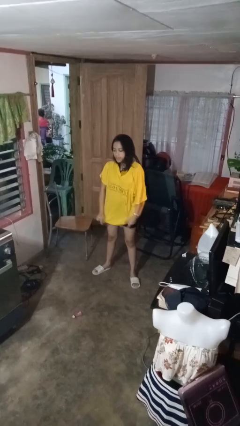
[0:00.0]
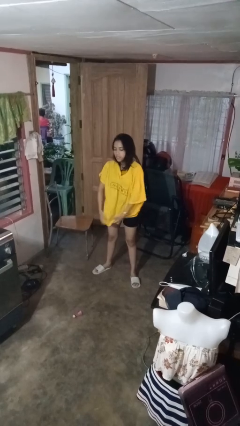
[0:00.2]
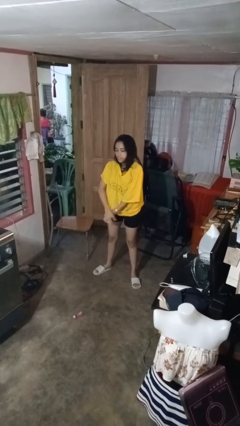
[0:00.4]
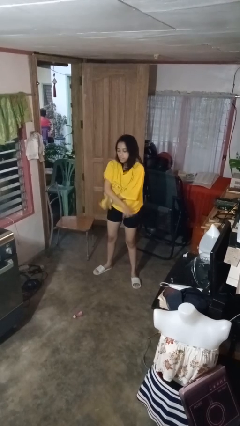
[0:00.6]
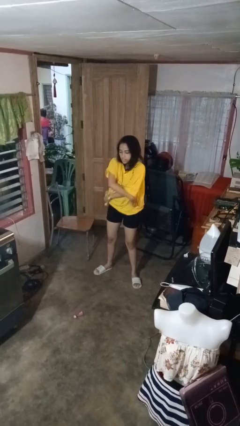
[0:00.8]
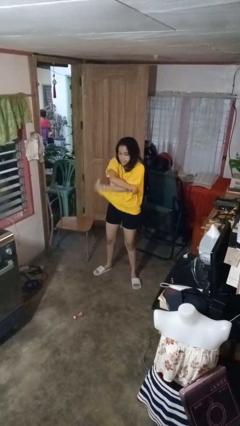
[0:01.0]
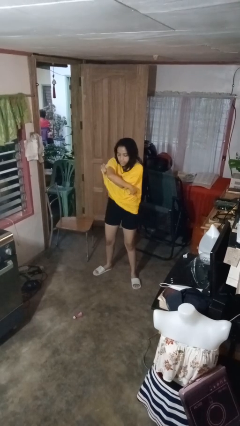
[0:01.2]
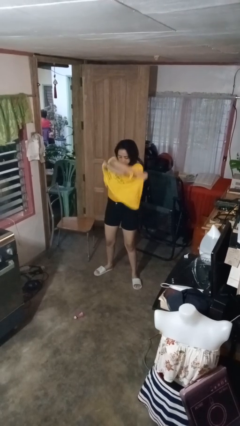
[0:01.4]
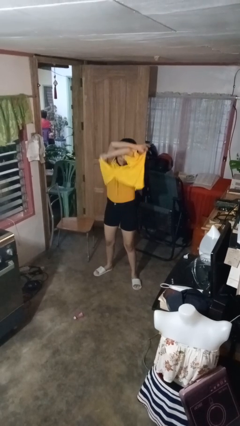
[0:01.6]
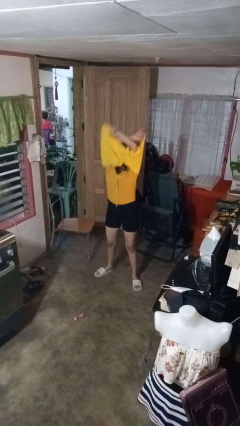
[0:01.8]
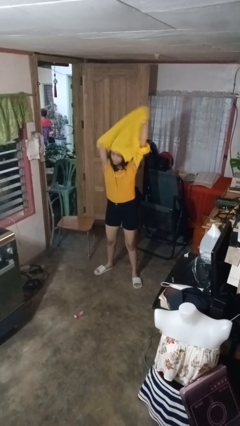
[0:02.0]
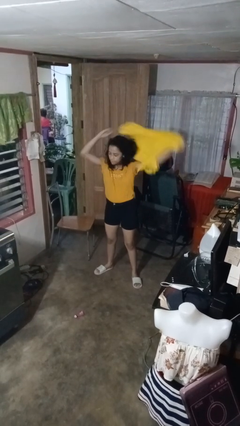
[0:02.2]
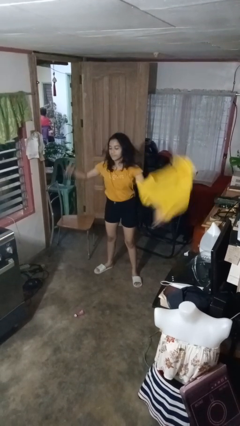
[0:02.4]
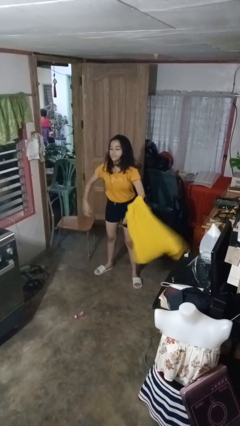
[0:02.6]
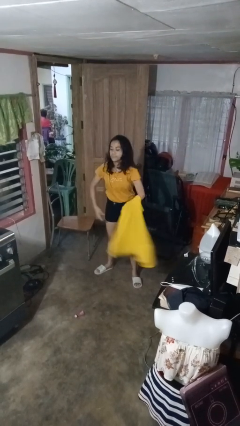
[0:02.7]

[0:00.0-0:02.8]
person takes off shirt

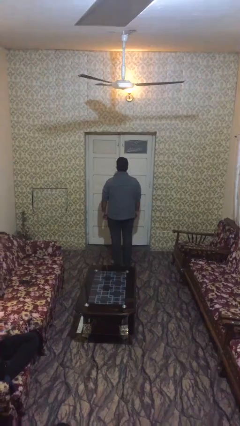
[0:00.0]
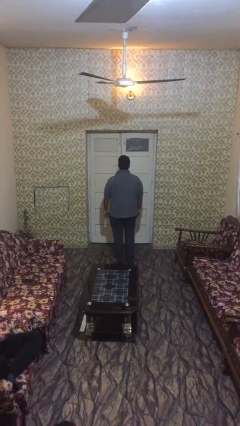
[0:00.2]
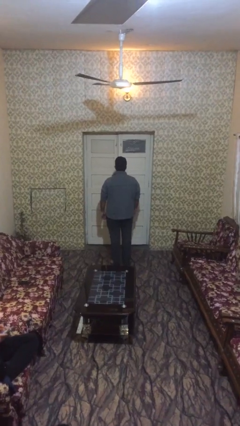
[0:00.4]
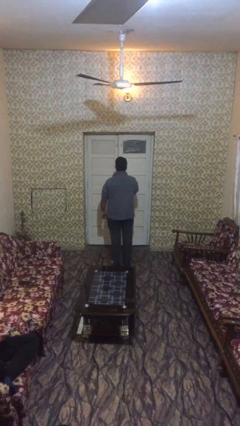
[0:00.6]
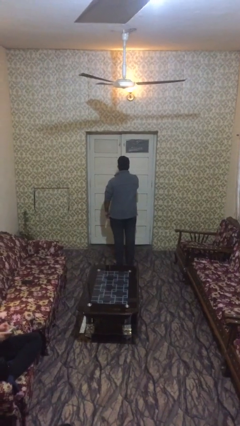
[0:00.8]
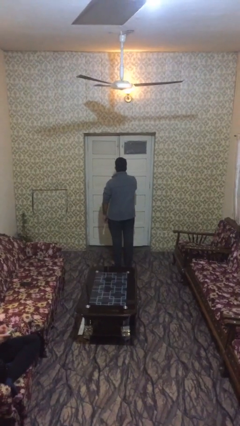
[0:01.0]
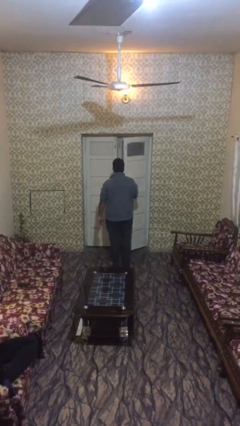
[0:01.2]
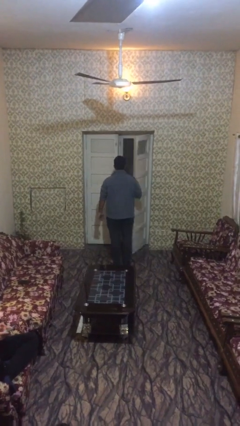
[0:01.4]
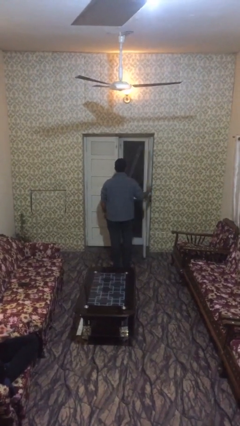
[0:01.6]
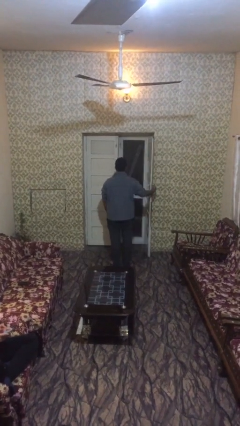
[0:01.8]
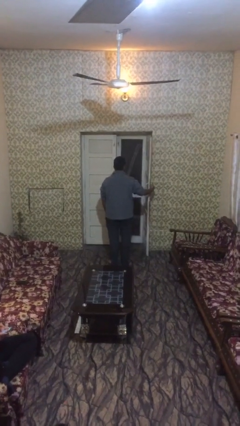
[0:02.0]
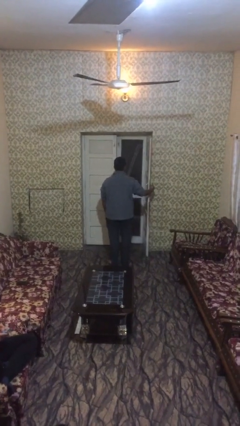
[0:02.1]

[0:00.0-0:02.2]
person opens facility door

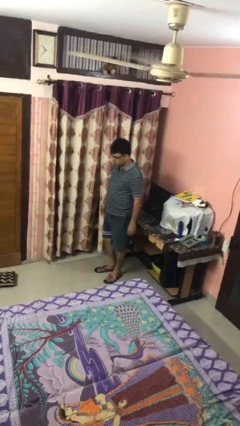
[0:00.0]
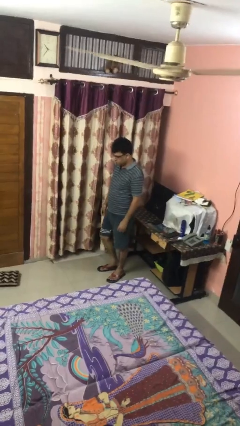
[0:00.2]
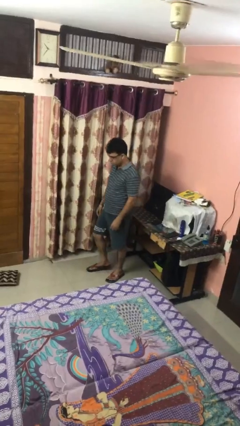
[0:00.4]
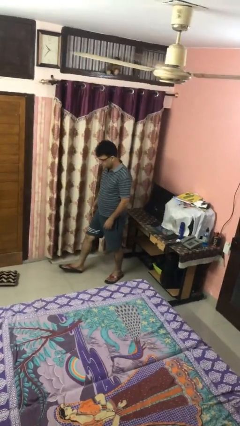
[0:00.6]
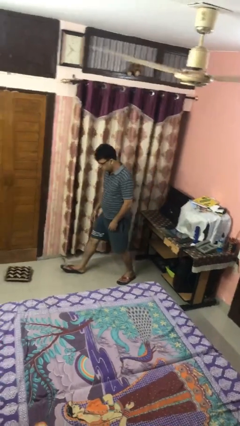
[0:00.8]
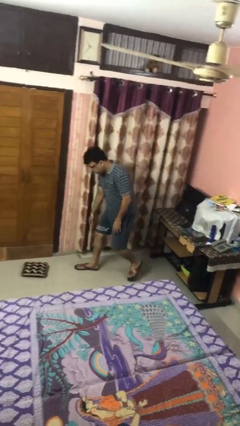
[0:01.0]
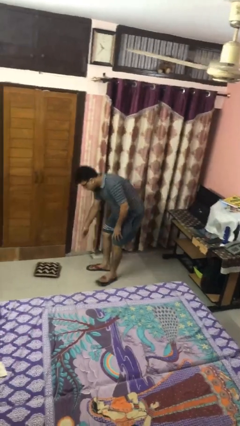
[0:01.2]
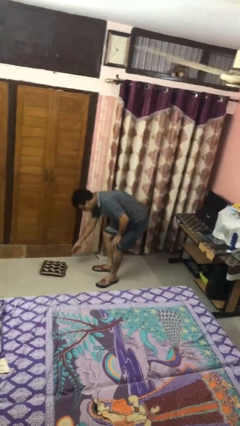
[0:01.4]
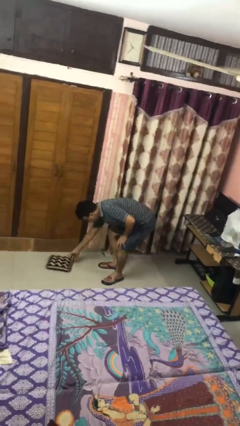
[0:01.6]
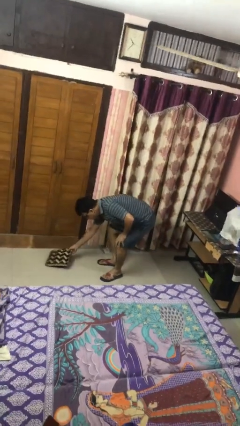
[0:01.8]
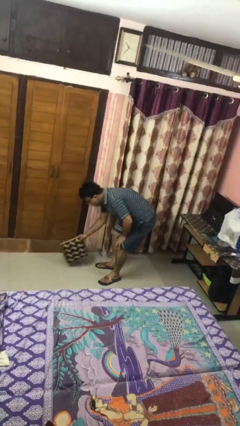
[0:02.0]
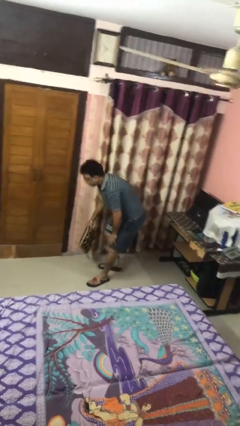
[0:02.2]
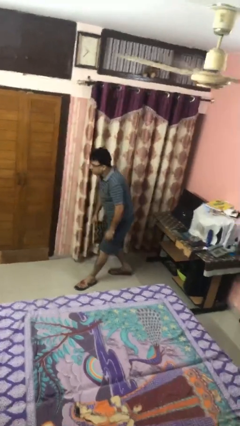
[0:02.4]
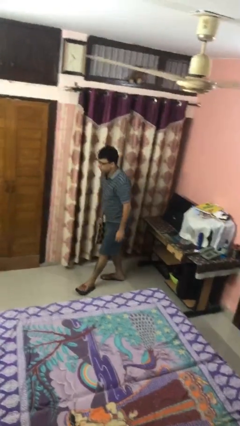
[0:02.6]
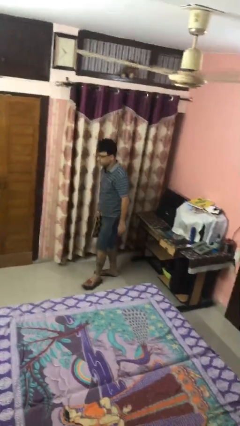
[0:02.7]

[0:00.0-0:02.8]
person picks up object from floor

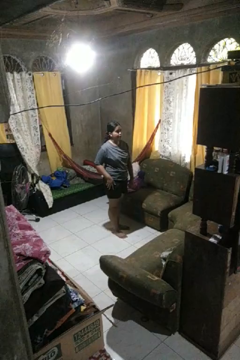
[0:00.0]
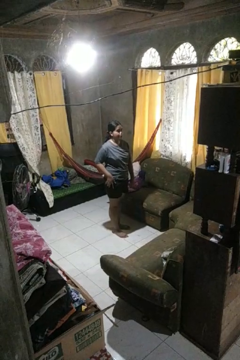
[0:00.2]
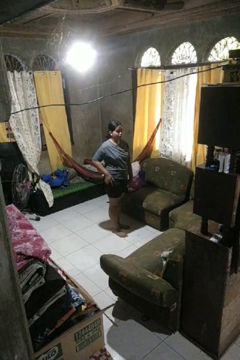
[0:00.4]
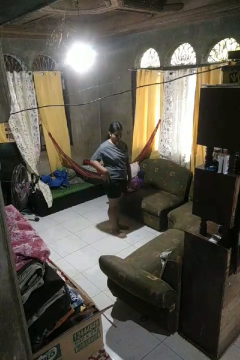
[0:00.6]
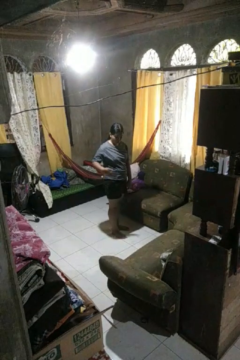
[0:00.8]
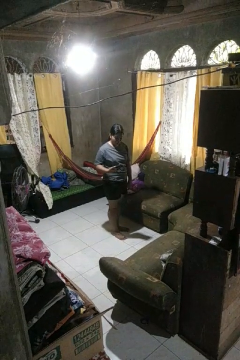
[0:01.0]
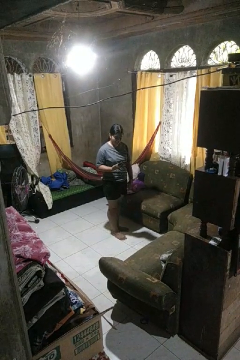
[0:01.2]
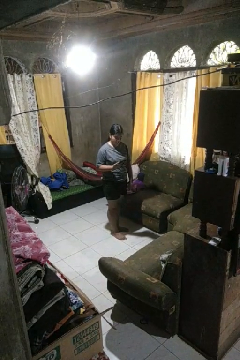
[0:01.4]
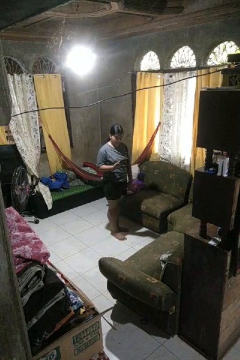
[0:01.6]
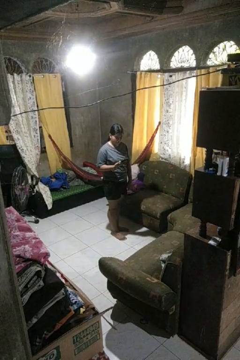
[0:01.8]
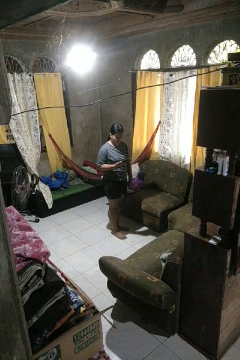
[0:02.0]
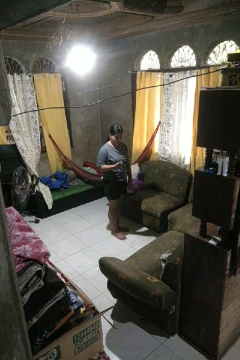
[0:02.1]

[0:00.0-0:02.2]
person takes phone from pocket

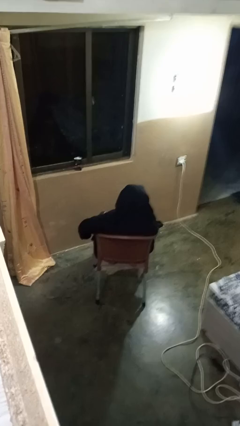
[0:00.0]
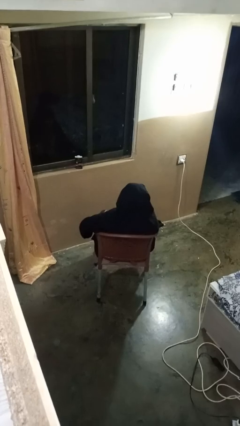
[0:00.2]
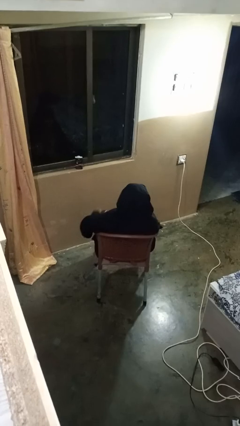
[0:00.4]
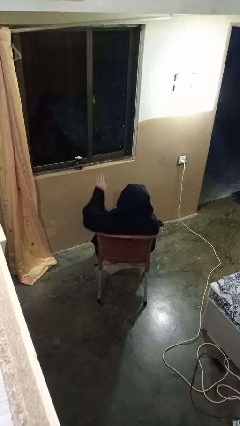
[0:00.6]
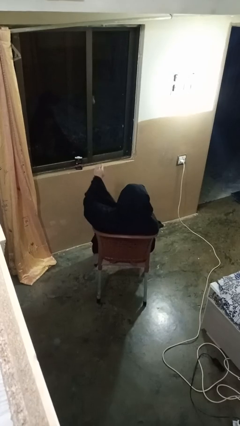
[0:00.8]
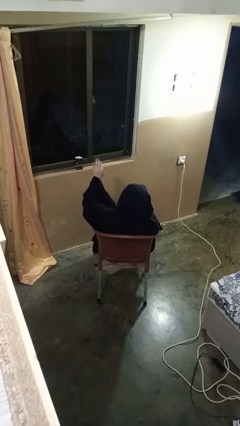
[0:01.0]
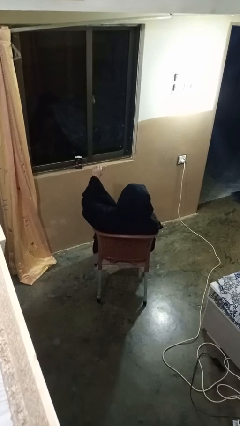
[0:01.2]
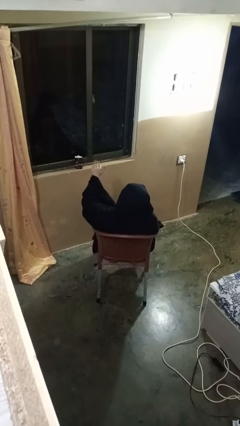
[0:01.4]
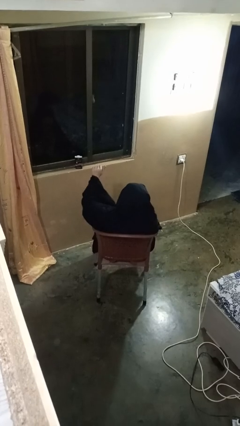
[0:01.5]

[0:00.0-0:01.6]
person gestures come here

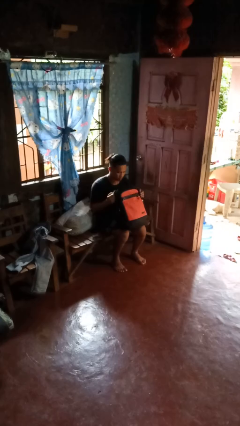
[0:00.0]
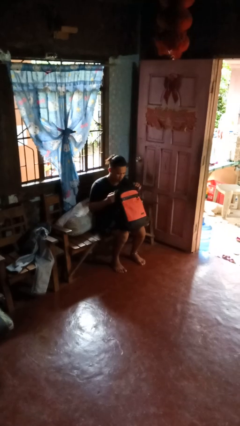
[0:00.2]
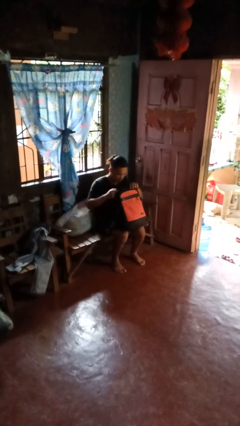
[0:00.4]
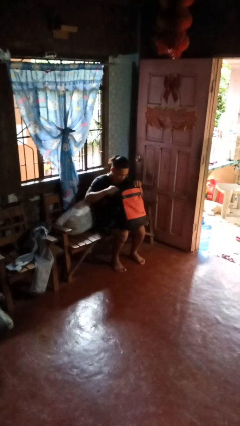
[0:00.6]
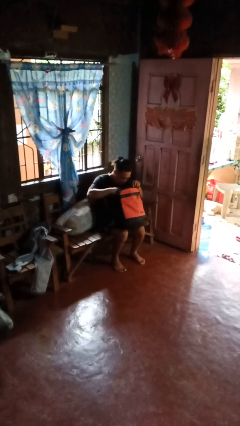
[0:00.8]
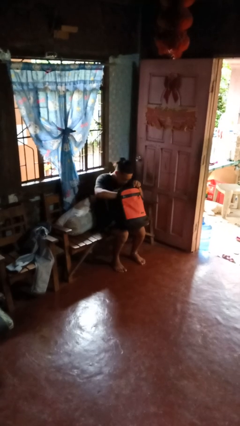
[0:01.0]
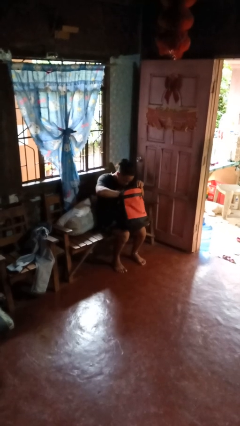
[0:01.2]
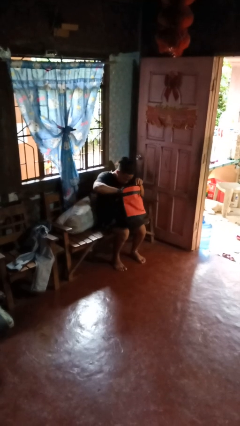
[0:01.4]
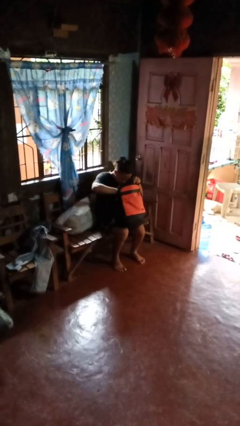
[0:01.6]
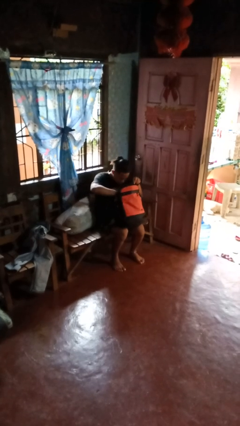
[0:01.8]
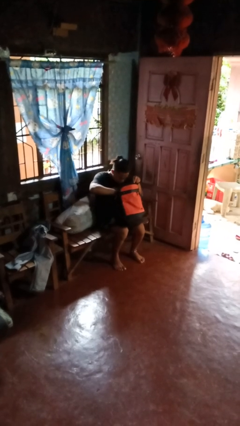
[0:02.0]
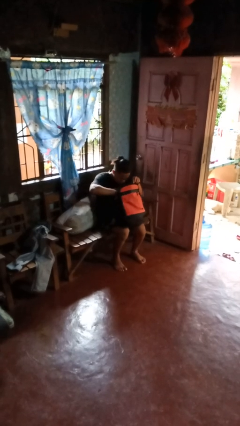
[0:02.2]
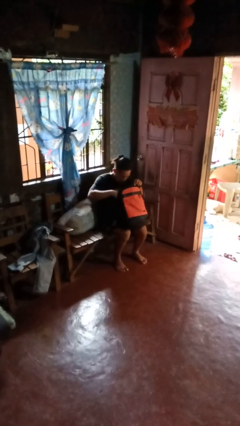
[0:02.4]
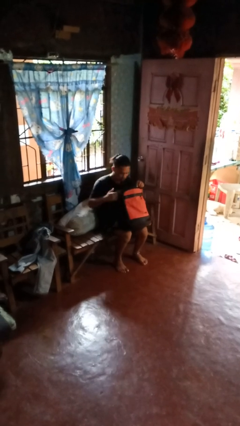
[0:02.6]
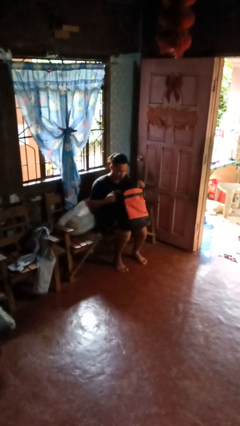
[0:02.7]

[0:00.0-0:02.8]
person searches in bag

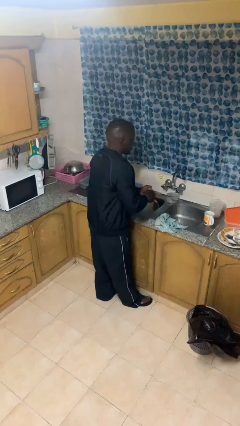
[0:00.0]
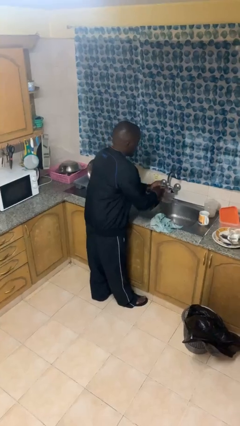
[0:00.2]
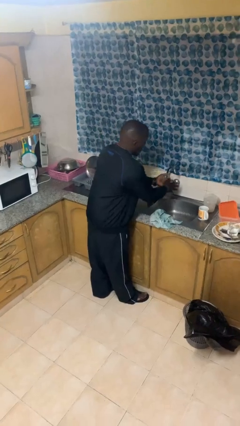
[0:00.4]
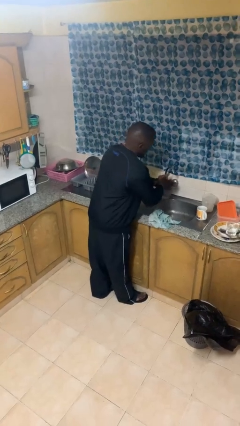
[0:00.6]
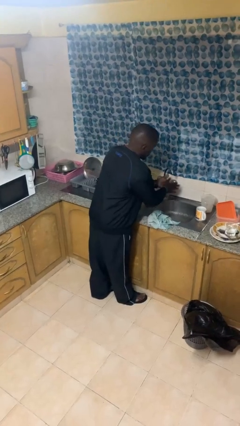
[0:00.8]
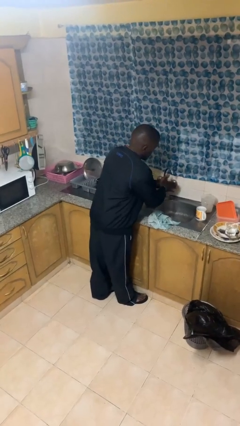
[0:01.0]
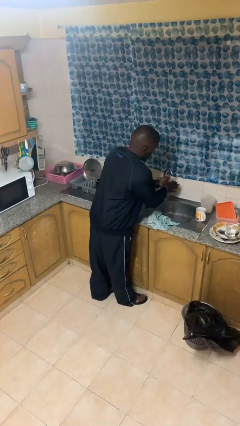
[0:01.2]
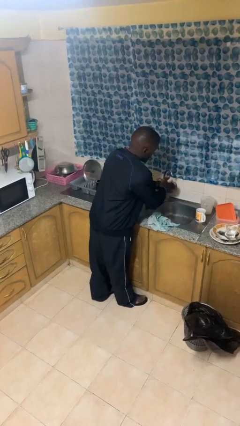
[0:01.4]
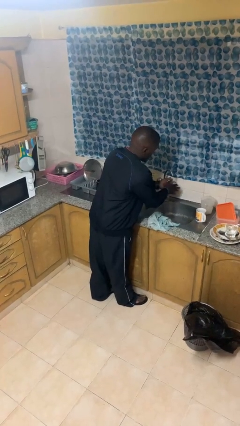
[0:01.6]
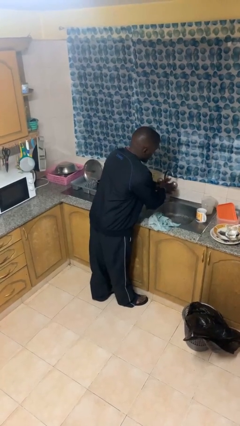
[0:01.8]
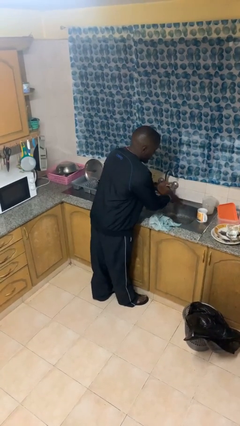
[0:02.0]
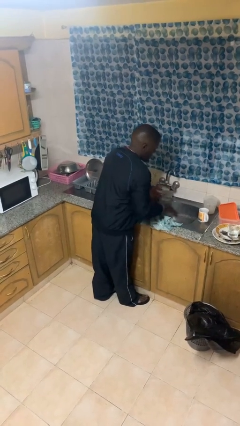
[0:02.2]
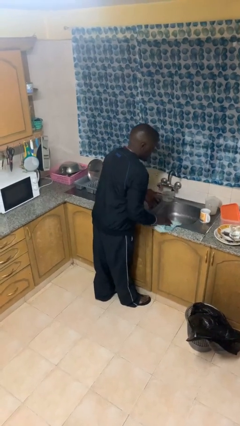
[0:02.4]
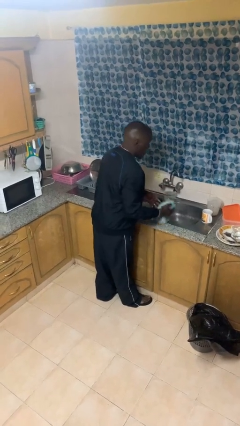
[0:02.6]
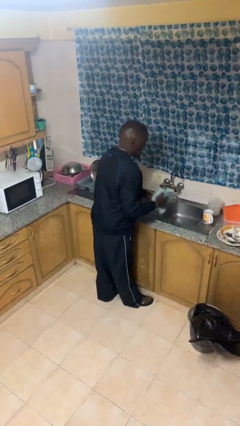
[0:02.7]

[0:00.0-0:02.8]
person washes hands

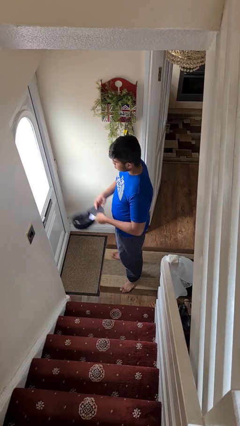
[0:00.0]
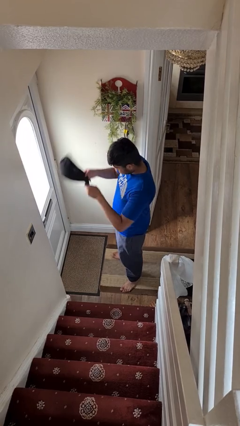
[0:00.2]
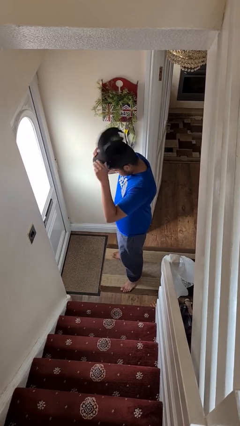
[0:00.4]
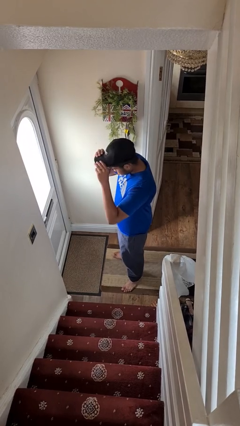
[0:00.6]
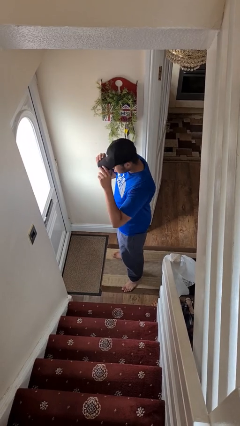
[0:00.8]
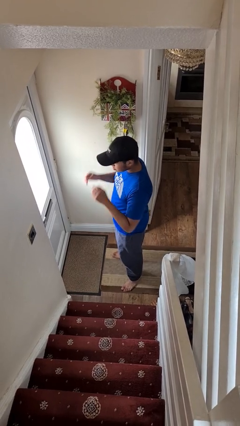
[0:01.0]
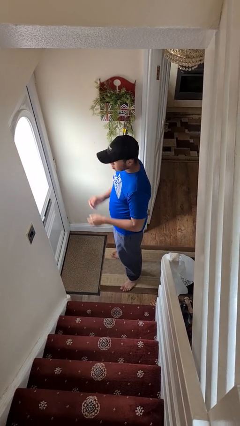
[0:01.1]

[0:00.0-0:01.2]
person puts on hat
